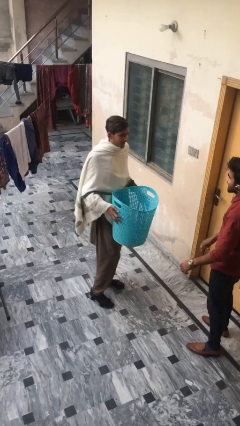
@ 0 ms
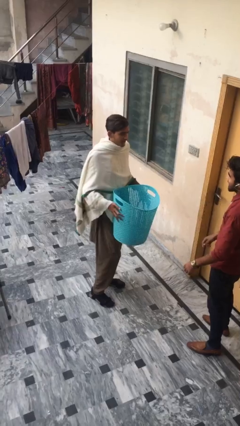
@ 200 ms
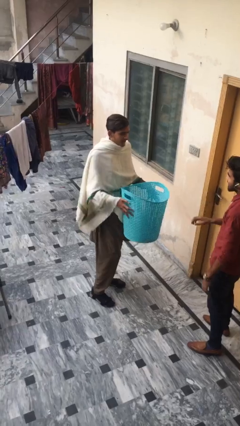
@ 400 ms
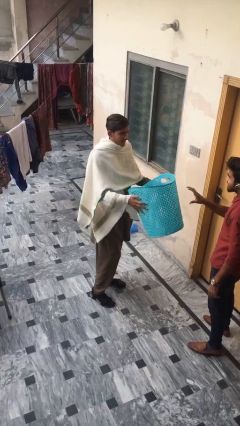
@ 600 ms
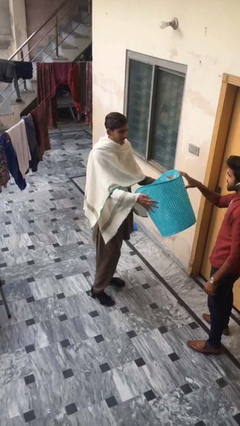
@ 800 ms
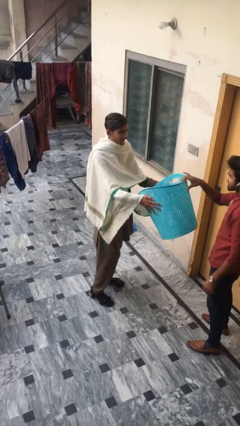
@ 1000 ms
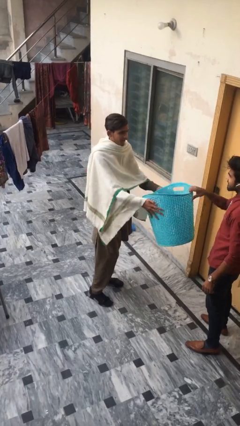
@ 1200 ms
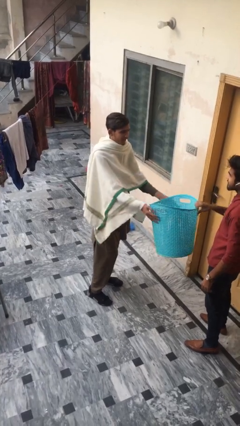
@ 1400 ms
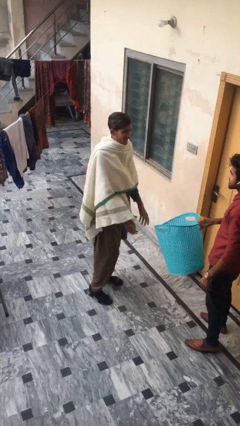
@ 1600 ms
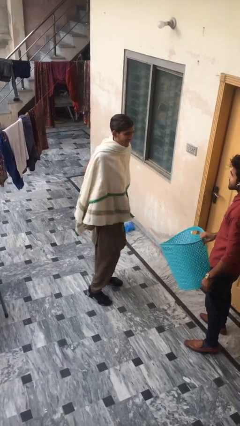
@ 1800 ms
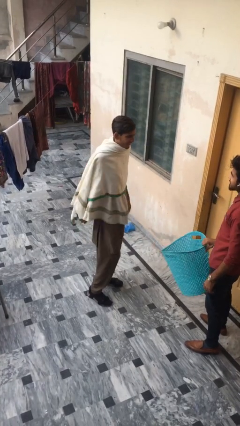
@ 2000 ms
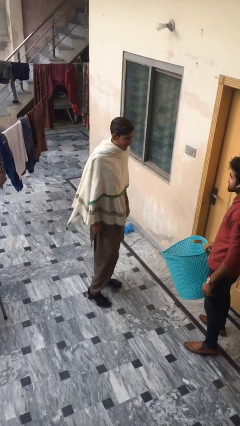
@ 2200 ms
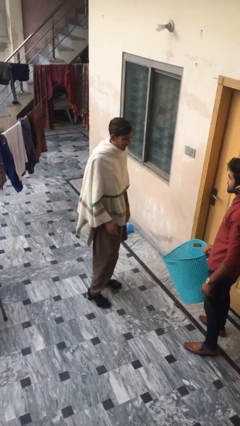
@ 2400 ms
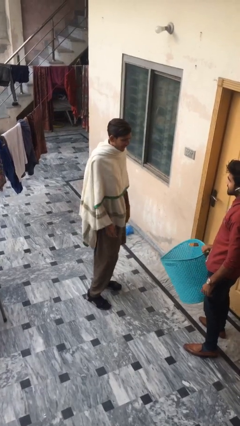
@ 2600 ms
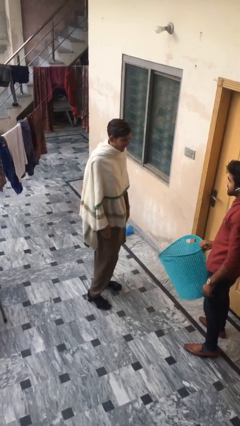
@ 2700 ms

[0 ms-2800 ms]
person transfers object to person

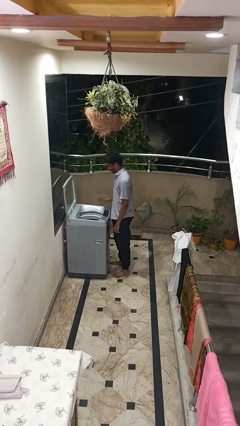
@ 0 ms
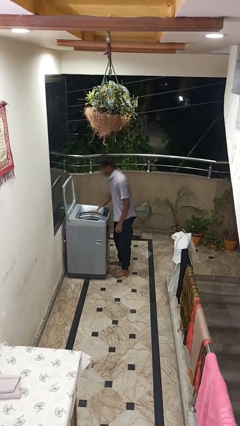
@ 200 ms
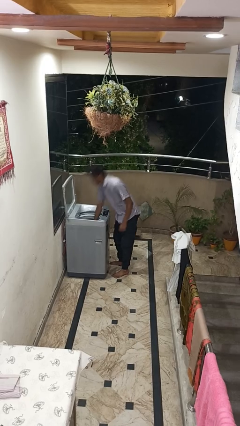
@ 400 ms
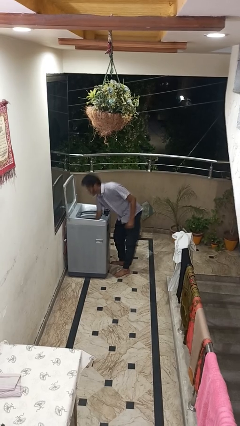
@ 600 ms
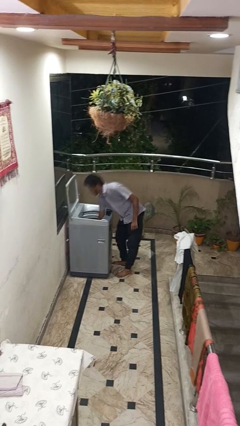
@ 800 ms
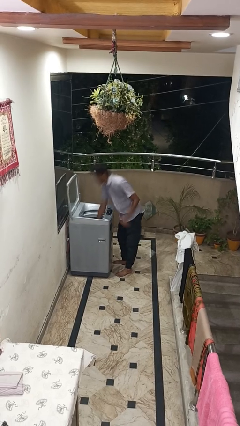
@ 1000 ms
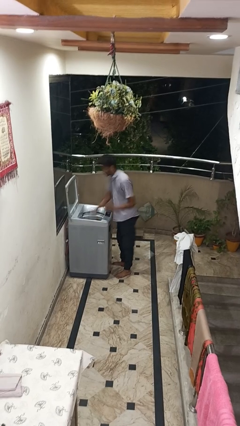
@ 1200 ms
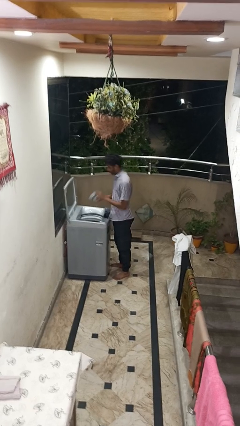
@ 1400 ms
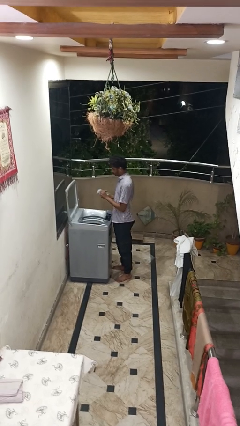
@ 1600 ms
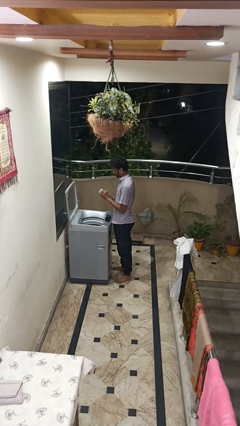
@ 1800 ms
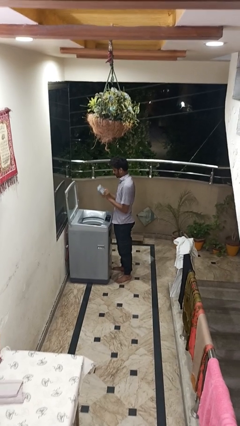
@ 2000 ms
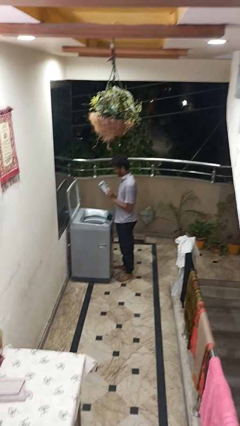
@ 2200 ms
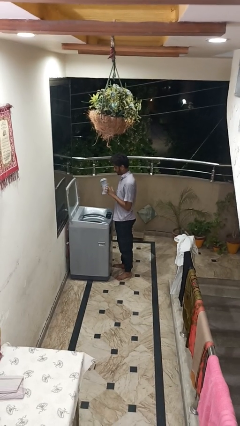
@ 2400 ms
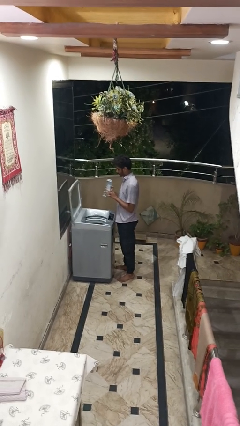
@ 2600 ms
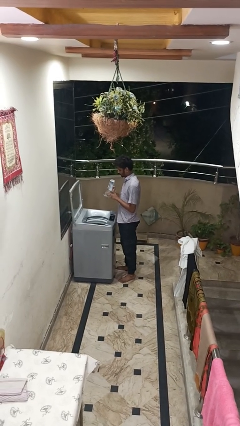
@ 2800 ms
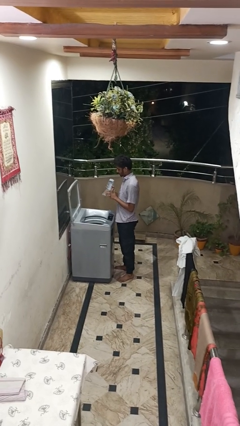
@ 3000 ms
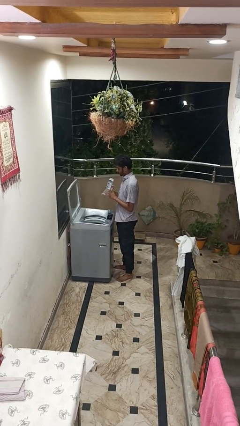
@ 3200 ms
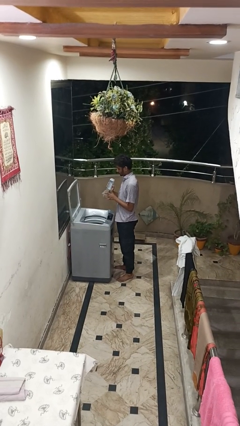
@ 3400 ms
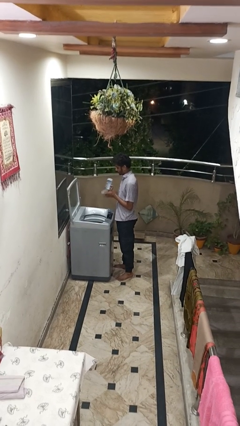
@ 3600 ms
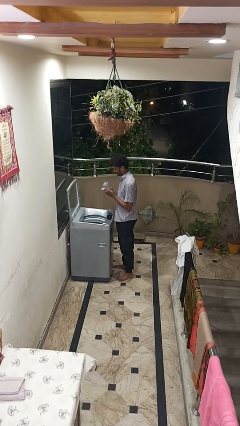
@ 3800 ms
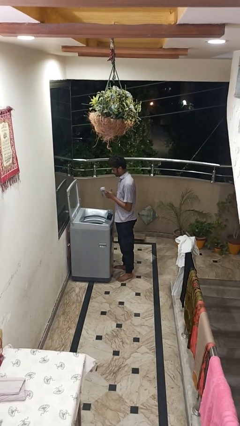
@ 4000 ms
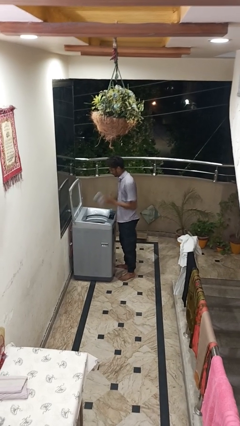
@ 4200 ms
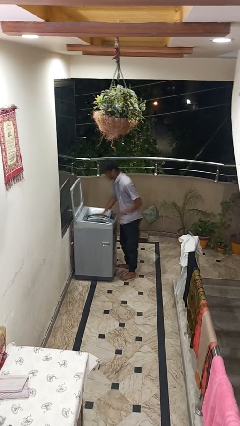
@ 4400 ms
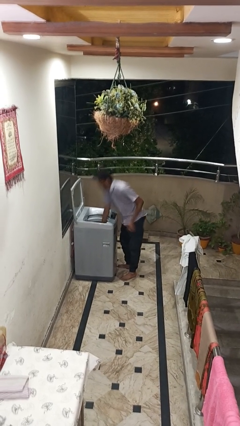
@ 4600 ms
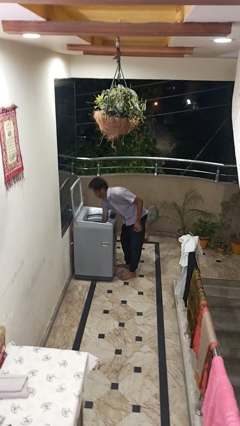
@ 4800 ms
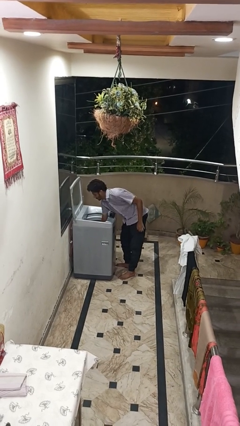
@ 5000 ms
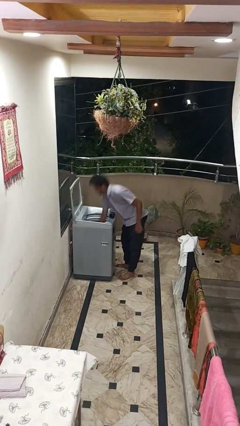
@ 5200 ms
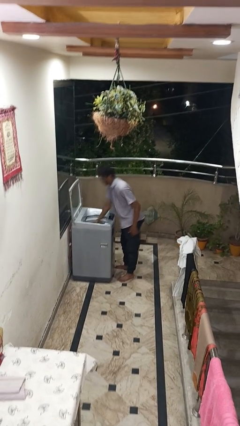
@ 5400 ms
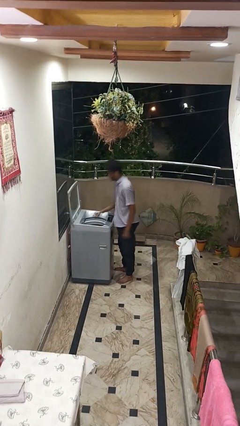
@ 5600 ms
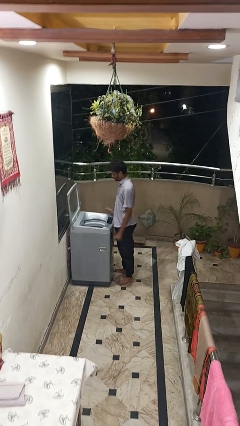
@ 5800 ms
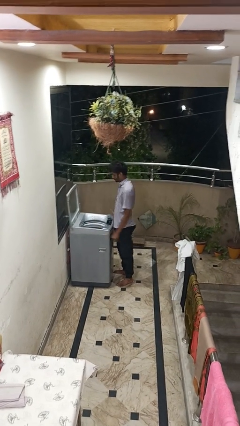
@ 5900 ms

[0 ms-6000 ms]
person cleans dryer lint trap

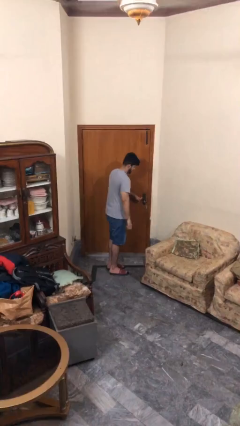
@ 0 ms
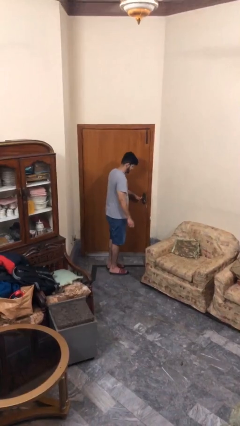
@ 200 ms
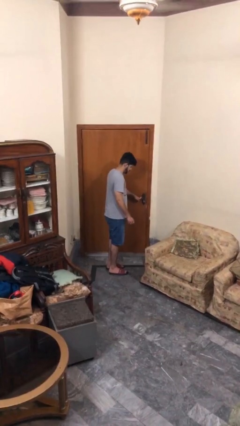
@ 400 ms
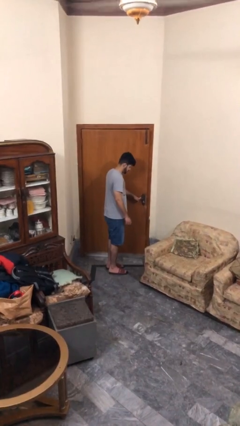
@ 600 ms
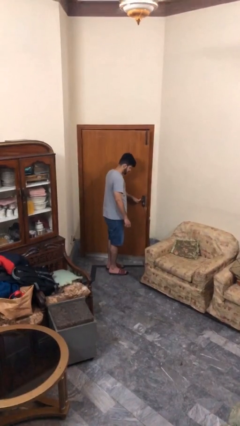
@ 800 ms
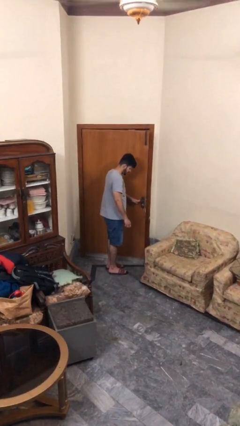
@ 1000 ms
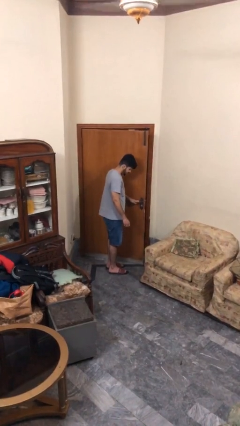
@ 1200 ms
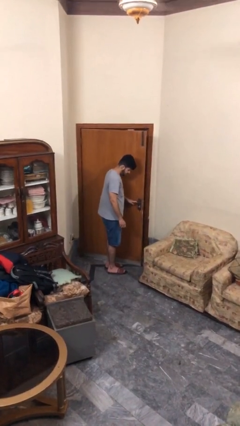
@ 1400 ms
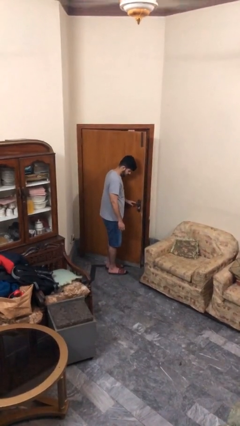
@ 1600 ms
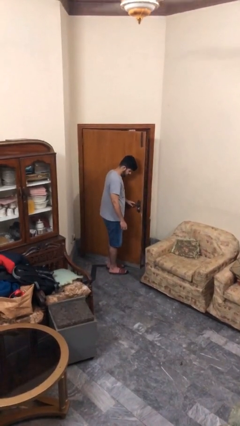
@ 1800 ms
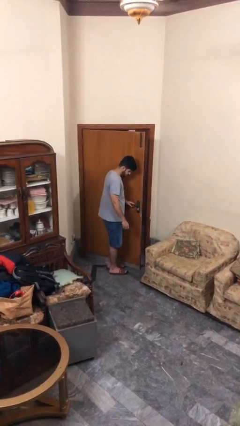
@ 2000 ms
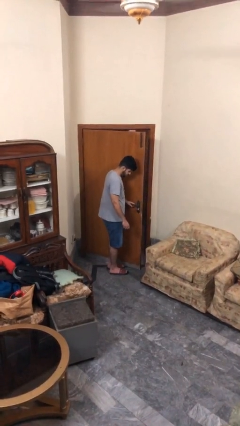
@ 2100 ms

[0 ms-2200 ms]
person opens facility door

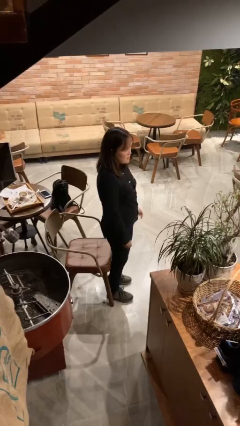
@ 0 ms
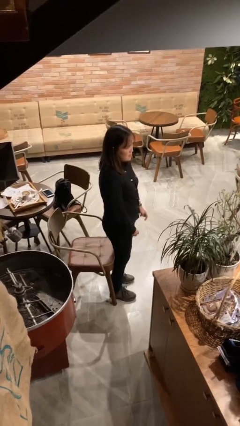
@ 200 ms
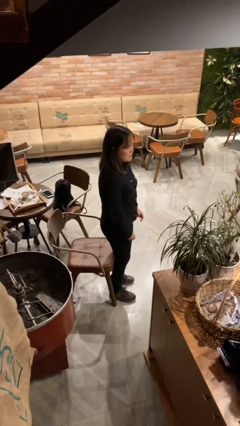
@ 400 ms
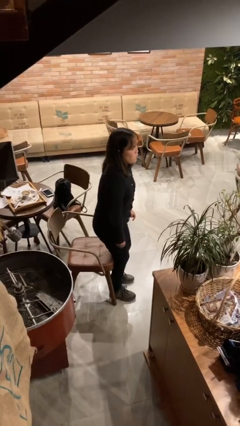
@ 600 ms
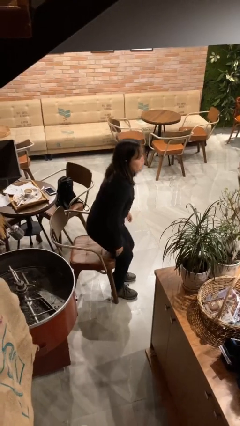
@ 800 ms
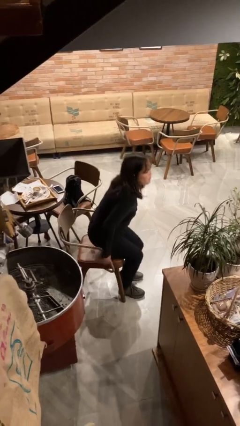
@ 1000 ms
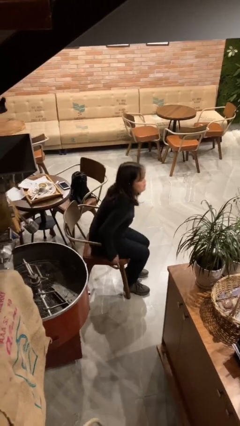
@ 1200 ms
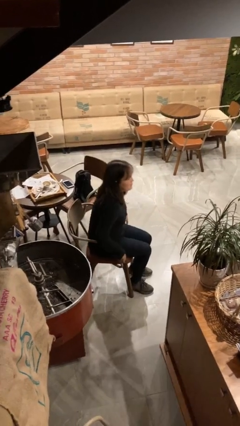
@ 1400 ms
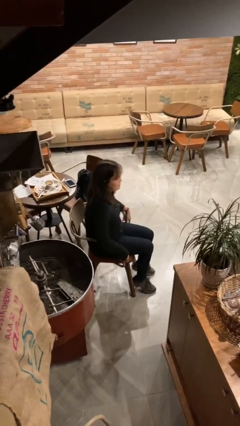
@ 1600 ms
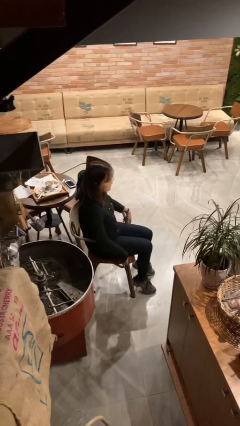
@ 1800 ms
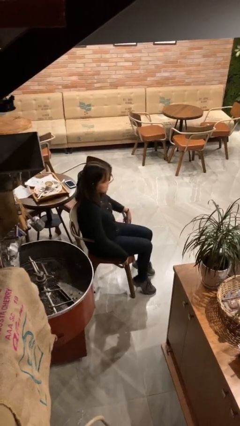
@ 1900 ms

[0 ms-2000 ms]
person sits down

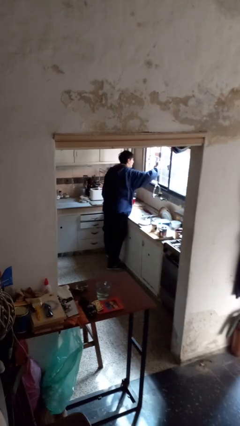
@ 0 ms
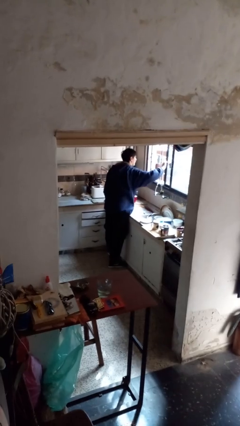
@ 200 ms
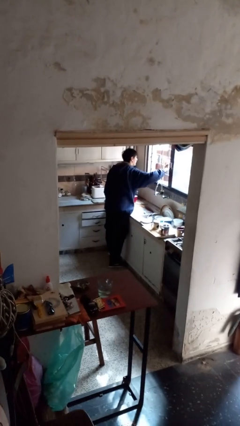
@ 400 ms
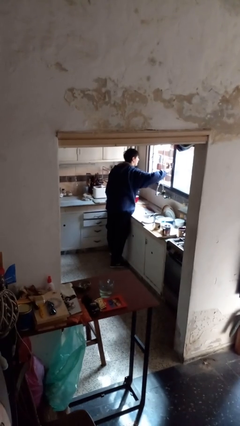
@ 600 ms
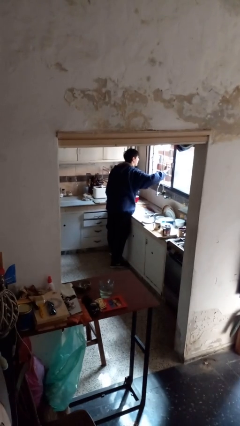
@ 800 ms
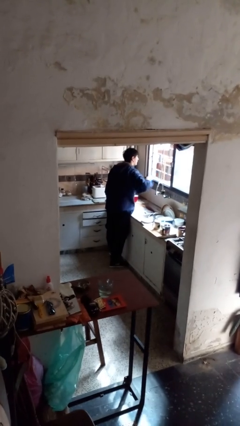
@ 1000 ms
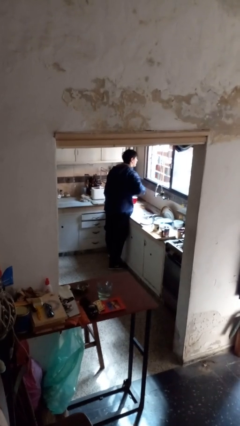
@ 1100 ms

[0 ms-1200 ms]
person opens home window

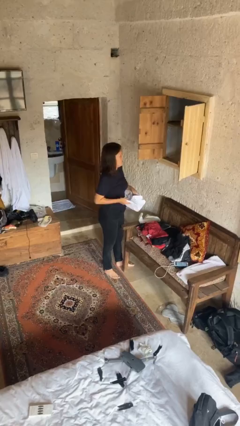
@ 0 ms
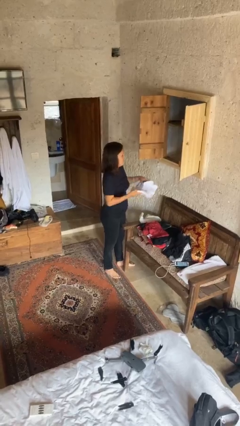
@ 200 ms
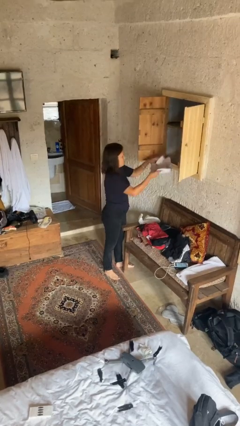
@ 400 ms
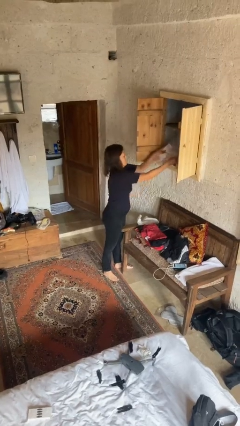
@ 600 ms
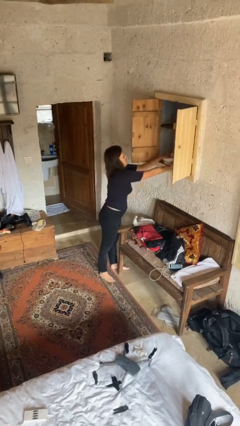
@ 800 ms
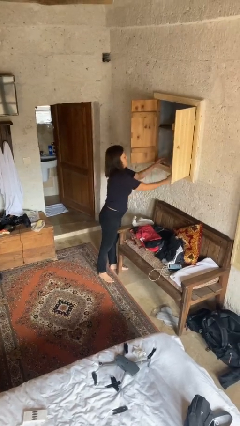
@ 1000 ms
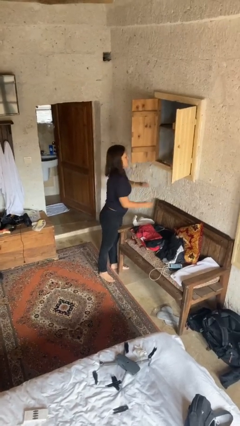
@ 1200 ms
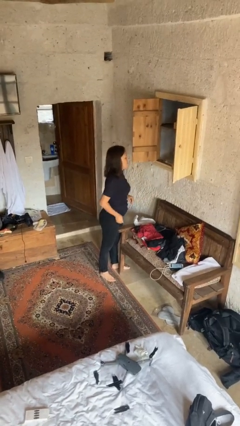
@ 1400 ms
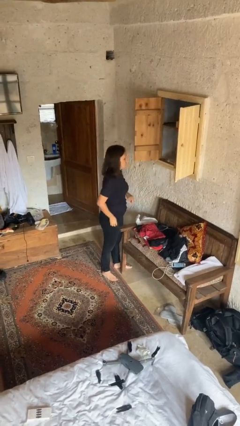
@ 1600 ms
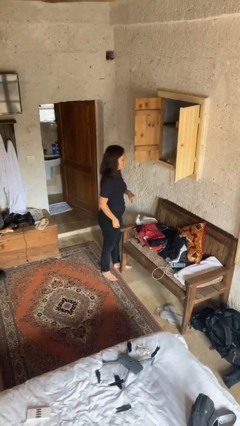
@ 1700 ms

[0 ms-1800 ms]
person puts clothes into dresser

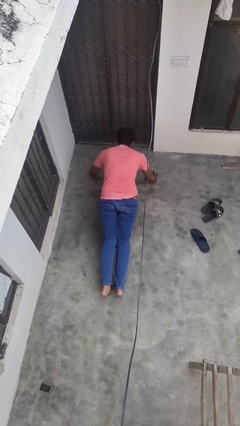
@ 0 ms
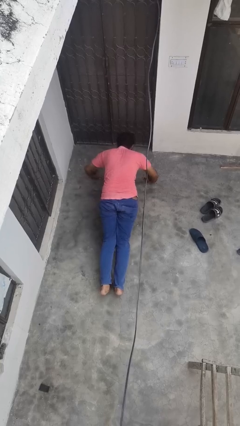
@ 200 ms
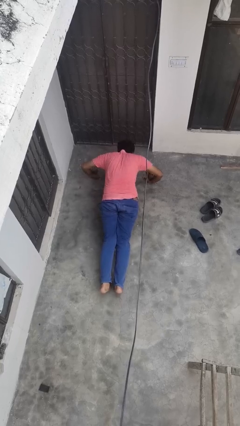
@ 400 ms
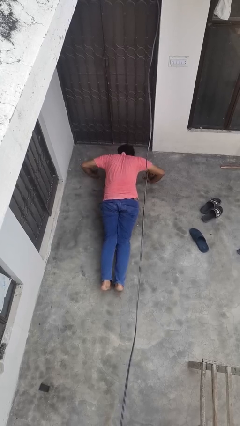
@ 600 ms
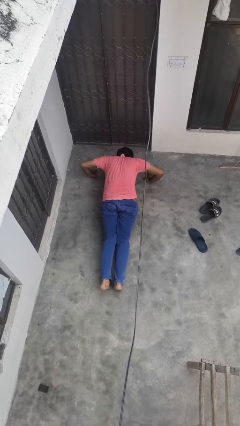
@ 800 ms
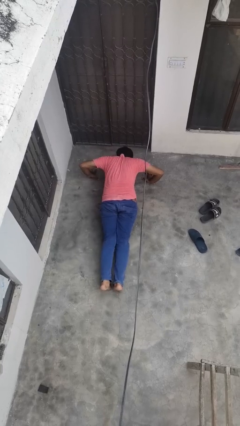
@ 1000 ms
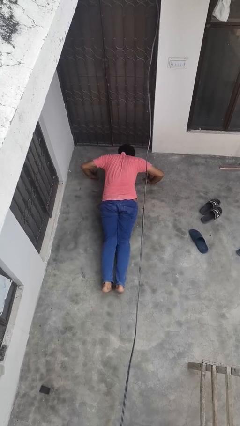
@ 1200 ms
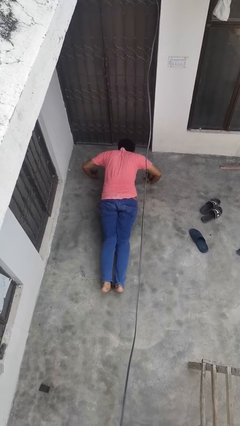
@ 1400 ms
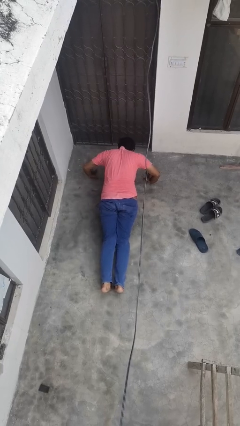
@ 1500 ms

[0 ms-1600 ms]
person exercises with pushup
